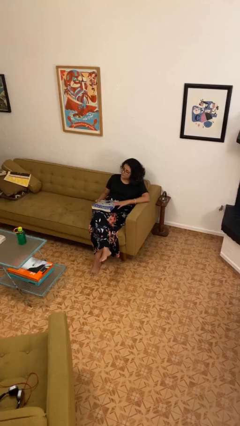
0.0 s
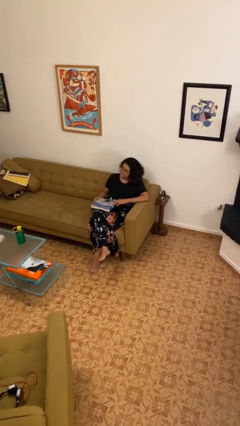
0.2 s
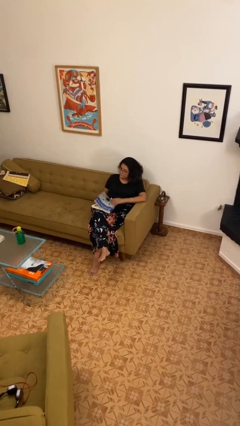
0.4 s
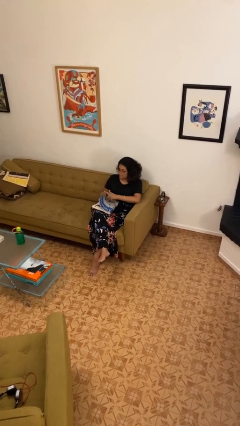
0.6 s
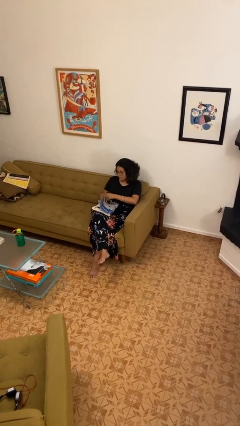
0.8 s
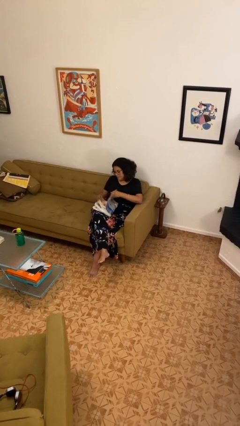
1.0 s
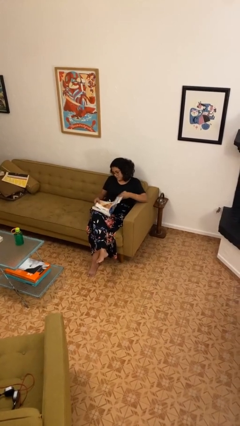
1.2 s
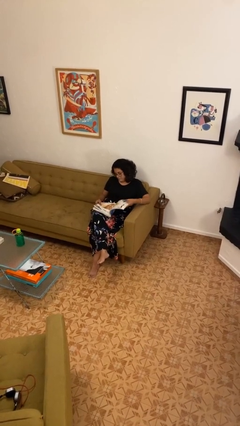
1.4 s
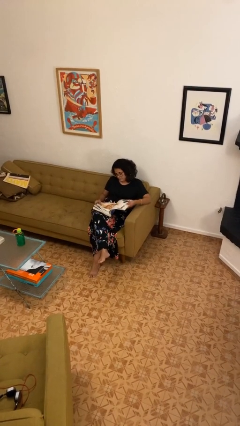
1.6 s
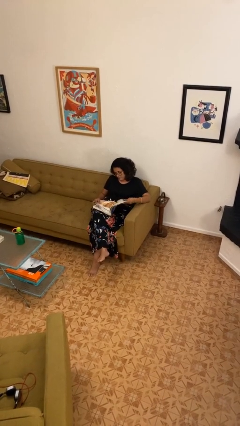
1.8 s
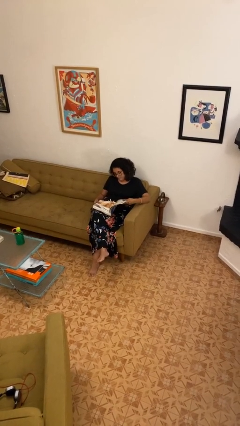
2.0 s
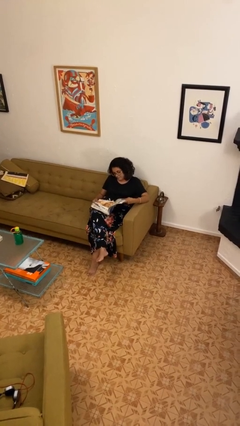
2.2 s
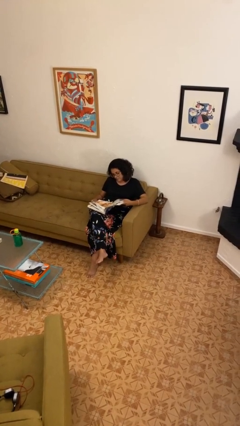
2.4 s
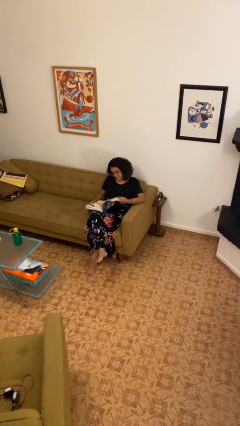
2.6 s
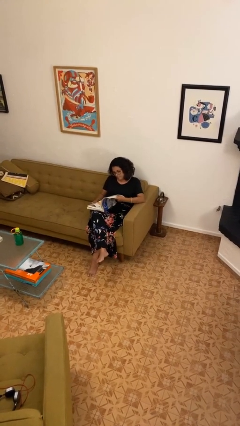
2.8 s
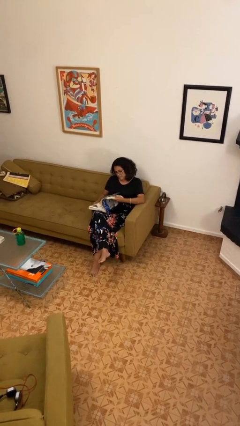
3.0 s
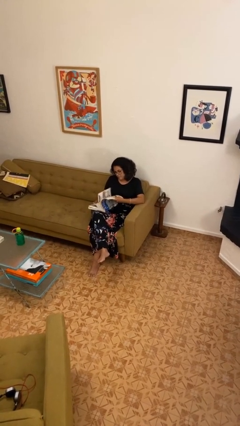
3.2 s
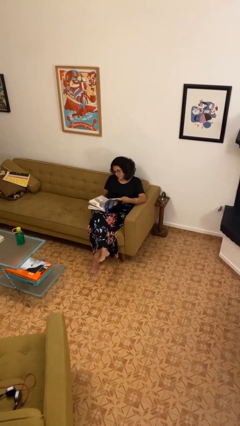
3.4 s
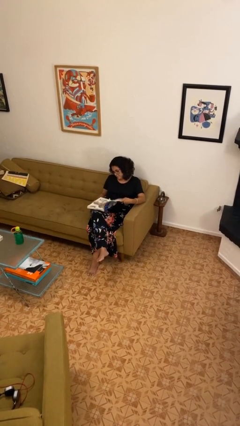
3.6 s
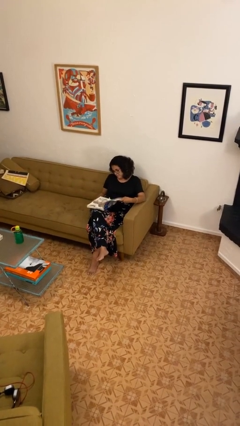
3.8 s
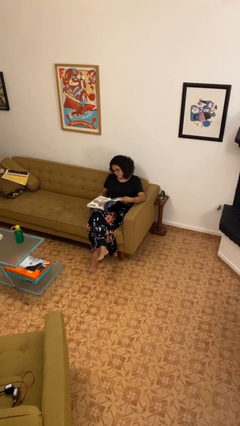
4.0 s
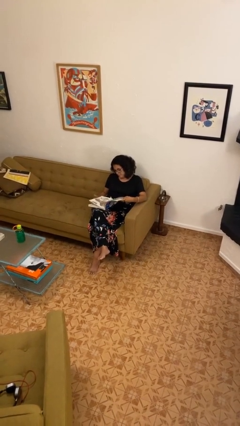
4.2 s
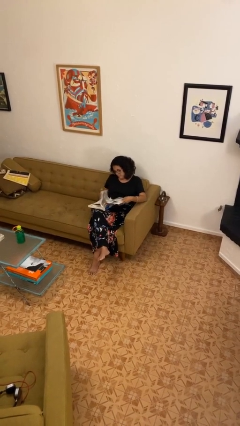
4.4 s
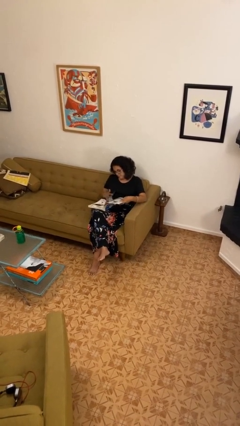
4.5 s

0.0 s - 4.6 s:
person reads book

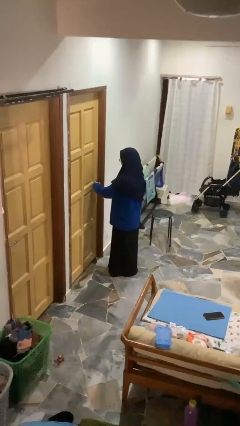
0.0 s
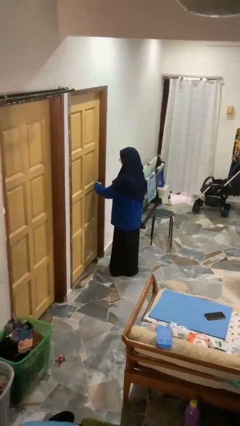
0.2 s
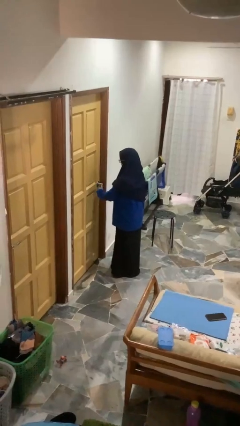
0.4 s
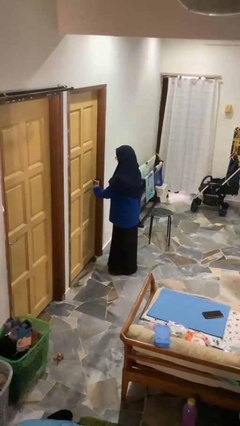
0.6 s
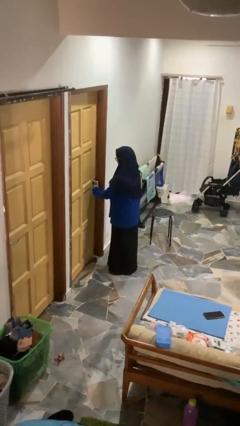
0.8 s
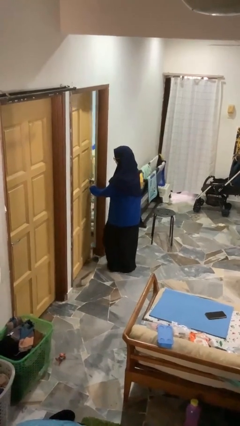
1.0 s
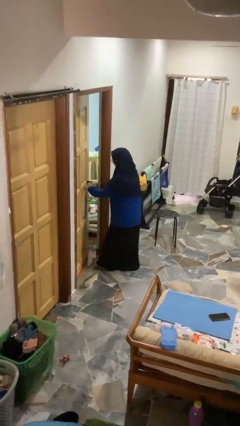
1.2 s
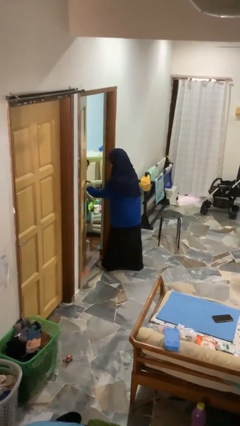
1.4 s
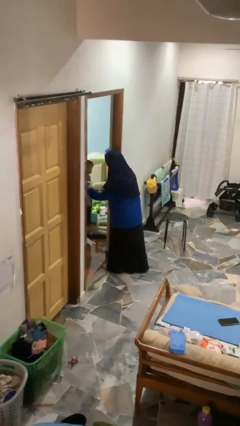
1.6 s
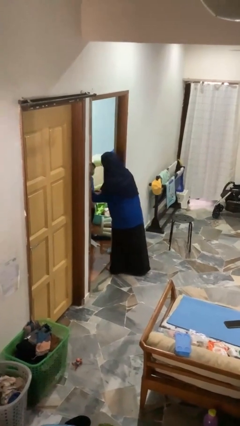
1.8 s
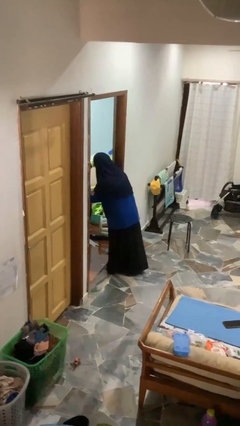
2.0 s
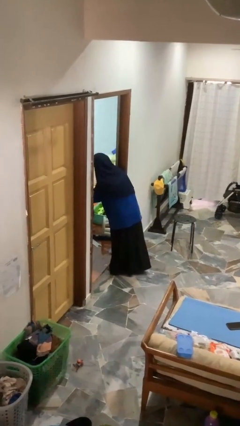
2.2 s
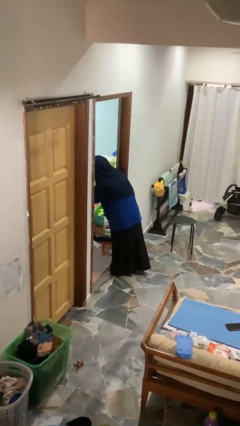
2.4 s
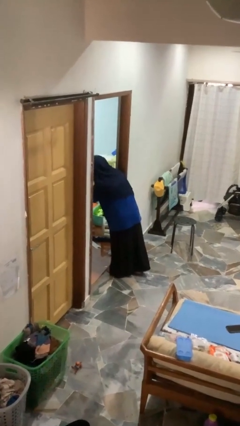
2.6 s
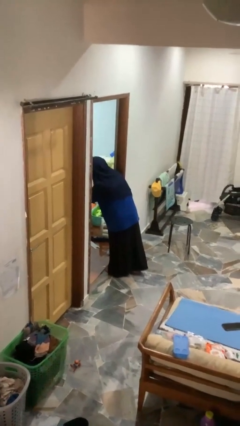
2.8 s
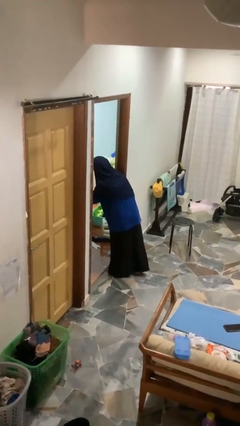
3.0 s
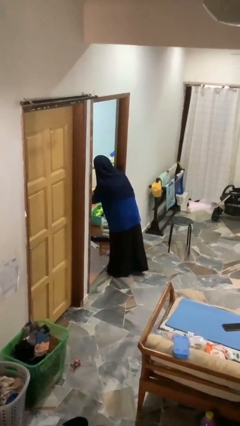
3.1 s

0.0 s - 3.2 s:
person opens facility door

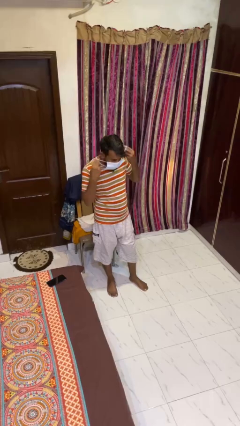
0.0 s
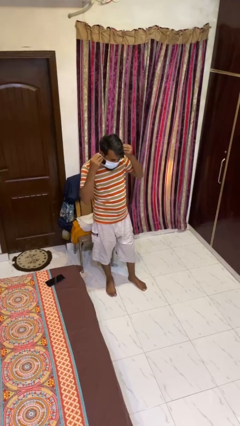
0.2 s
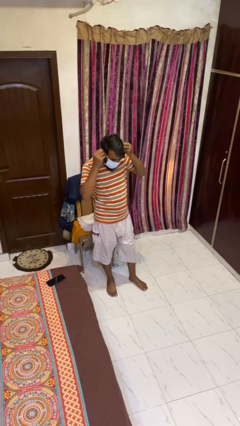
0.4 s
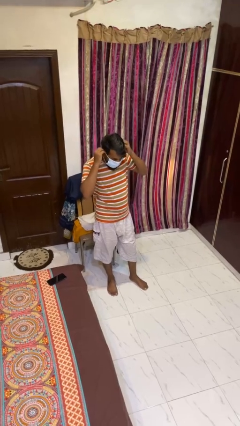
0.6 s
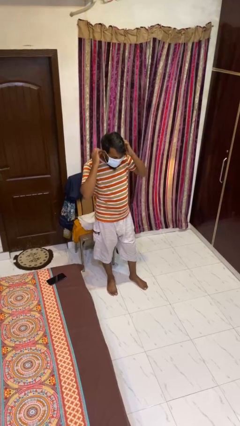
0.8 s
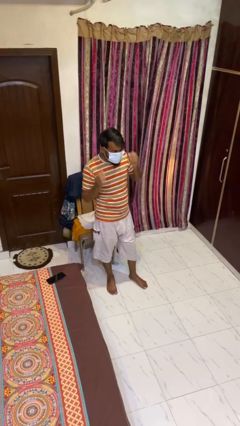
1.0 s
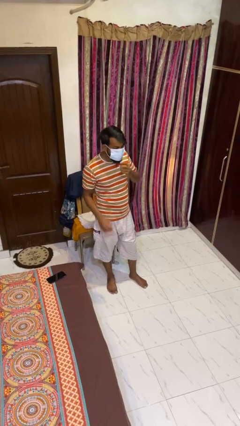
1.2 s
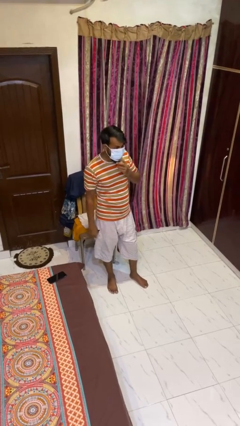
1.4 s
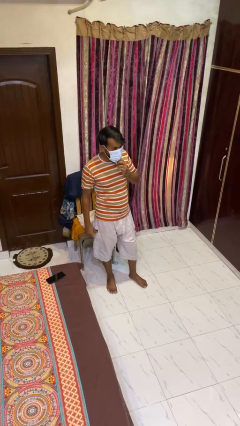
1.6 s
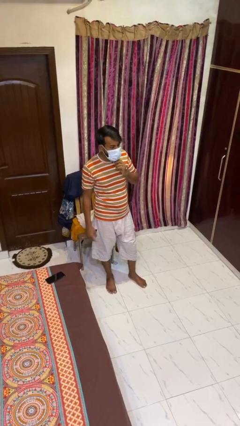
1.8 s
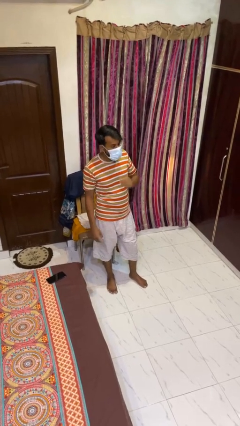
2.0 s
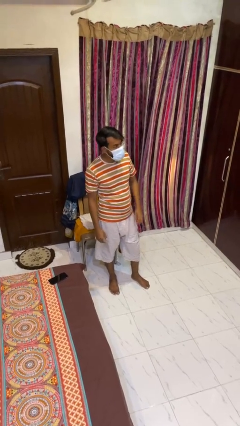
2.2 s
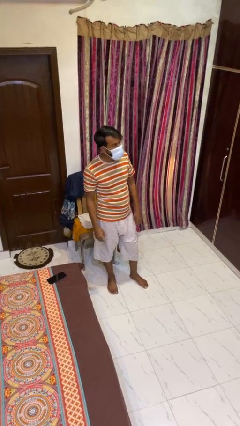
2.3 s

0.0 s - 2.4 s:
person puts on facemask

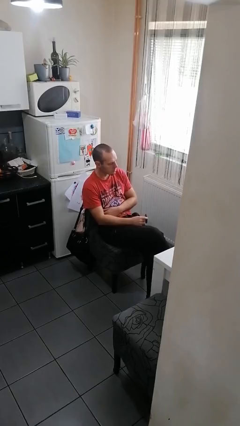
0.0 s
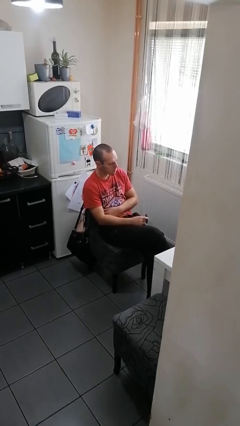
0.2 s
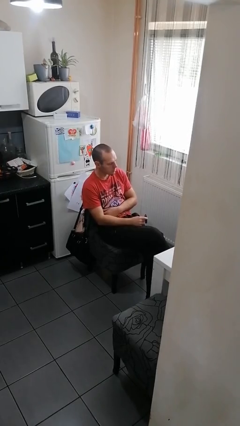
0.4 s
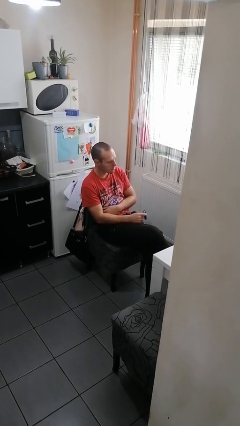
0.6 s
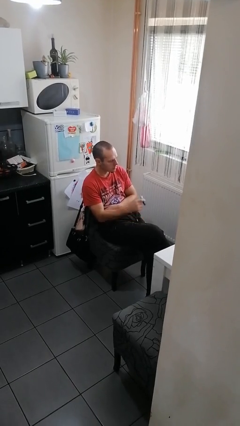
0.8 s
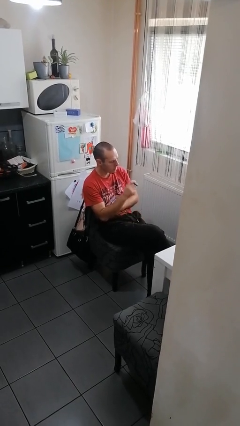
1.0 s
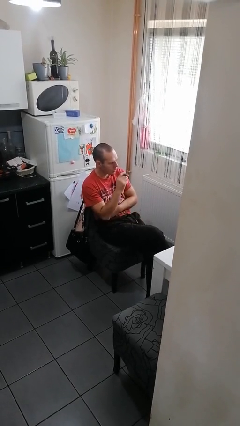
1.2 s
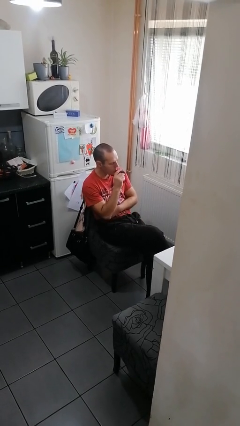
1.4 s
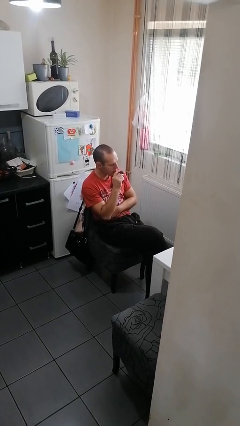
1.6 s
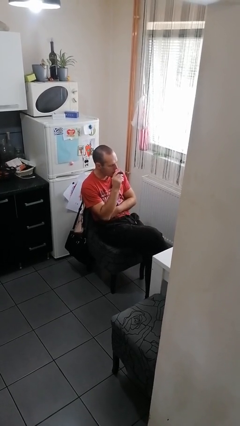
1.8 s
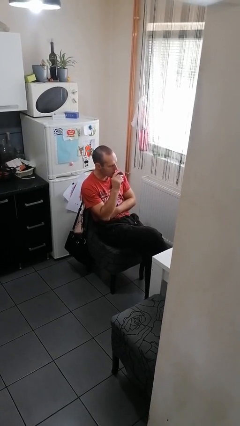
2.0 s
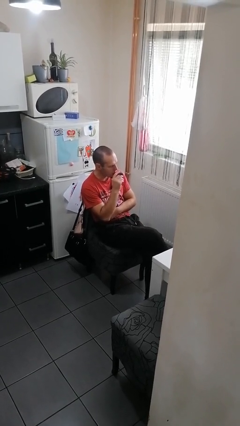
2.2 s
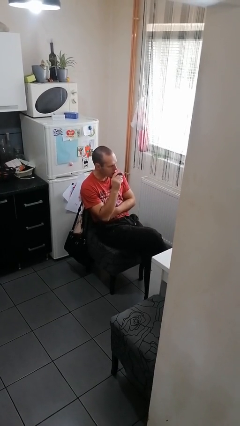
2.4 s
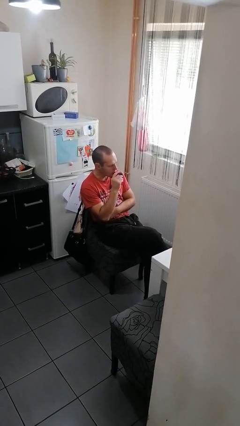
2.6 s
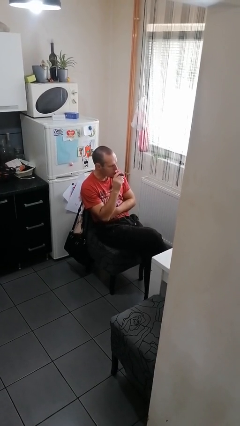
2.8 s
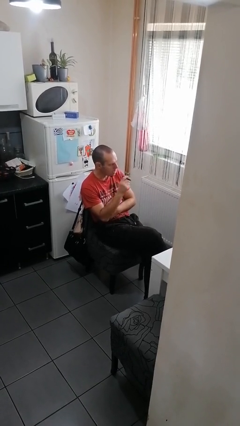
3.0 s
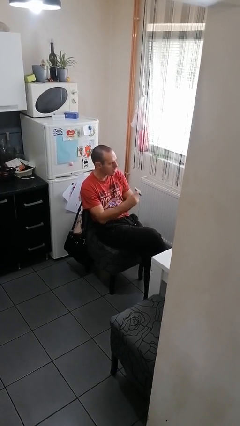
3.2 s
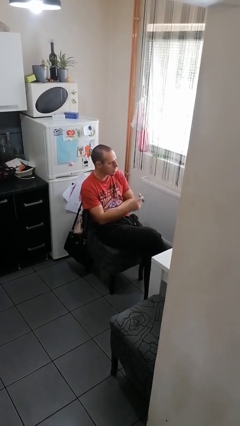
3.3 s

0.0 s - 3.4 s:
person vapes

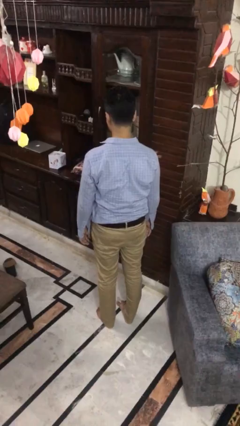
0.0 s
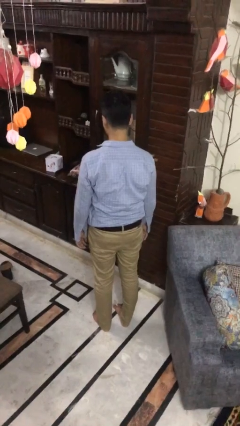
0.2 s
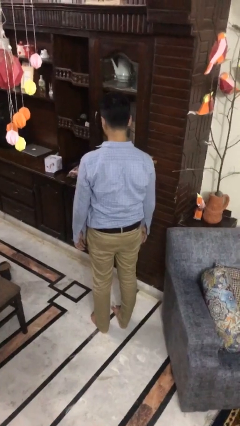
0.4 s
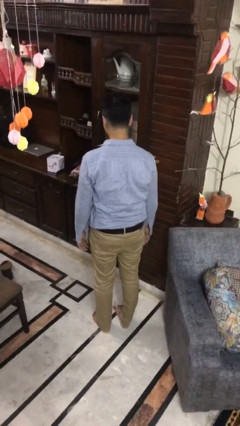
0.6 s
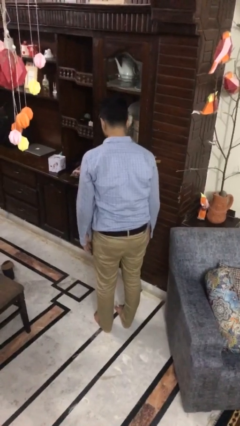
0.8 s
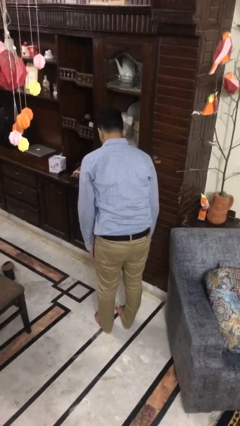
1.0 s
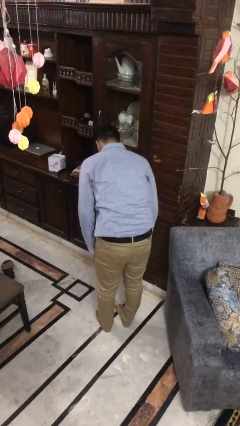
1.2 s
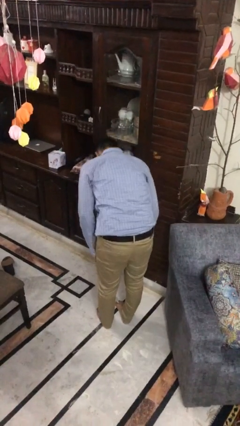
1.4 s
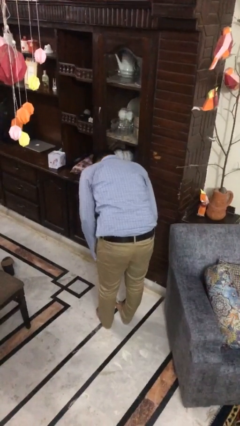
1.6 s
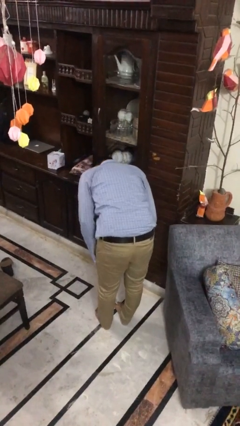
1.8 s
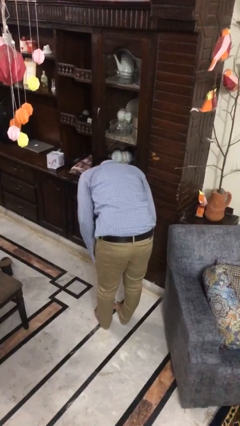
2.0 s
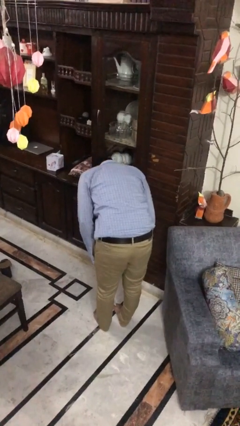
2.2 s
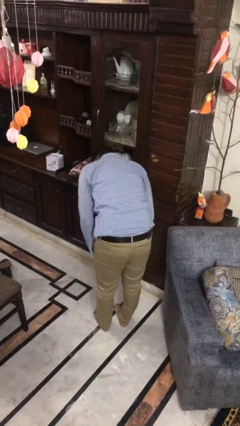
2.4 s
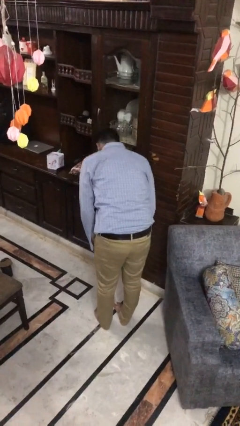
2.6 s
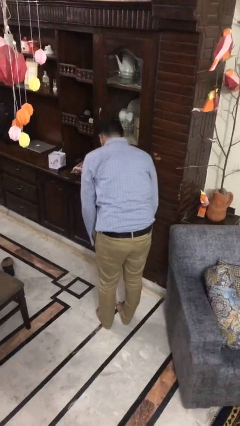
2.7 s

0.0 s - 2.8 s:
person bows
